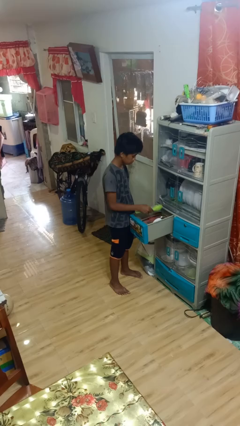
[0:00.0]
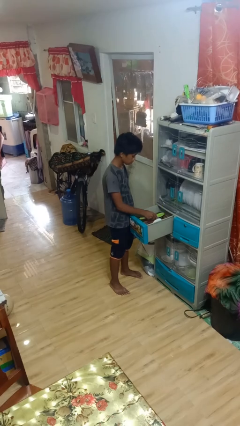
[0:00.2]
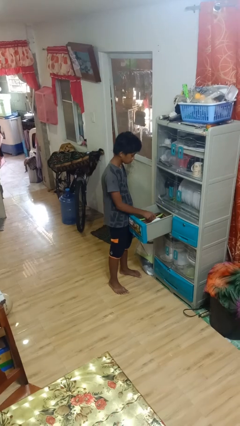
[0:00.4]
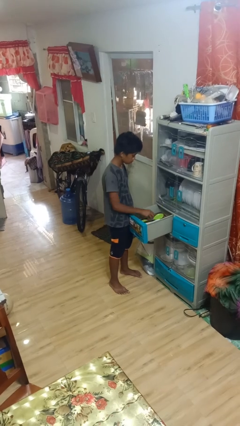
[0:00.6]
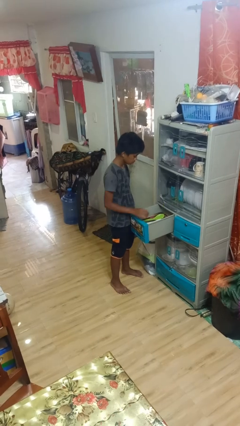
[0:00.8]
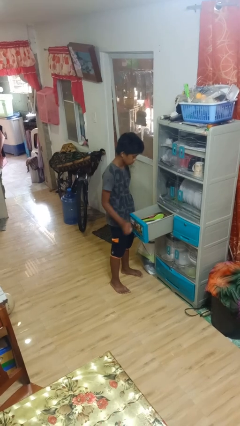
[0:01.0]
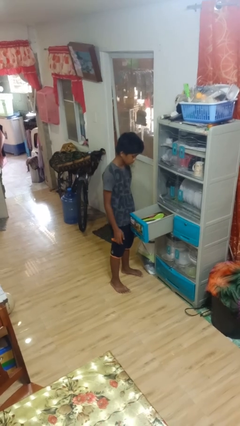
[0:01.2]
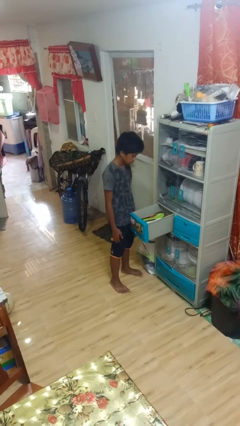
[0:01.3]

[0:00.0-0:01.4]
person puts object into kitchen drawer

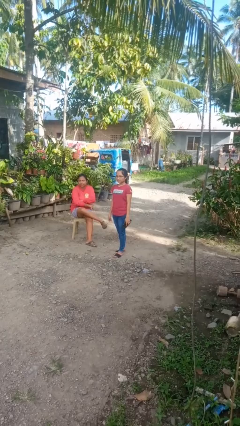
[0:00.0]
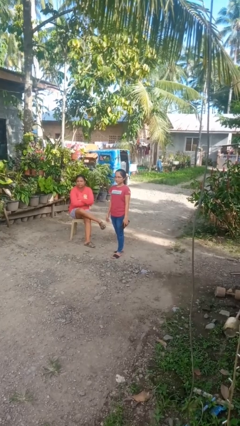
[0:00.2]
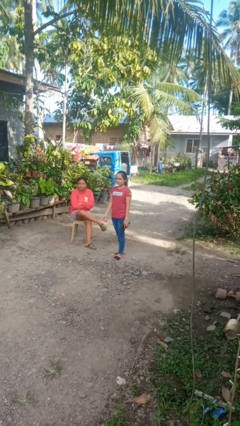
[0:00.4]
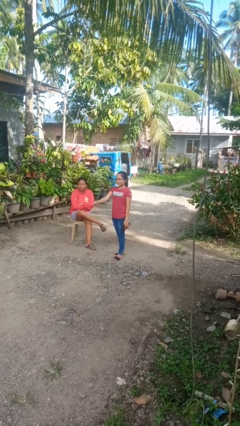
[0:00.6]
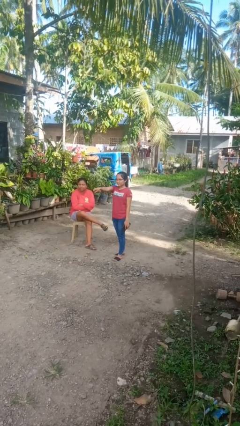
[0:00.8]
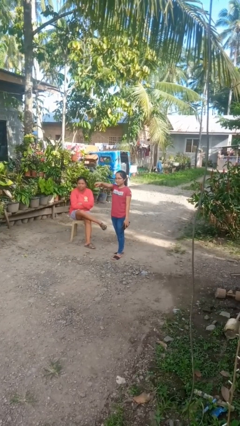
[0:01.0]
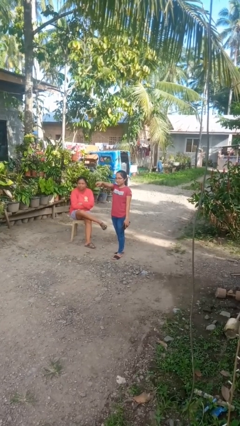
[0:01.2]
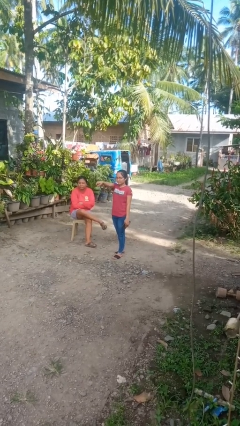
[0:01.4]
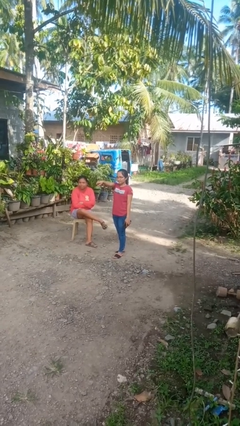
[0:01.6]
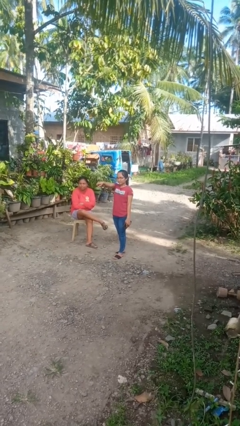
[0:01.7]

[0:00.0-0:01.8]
person points at person

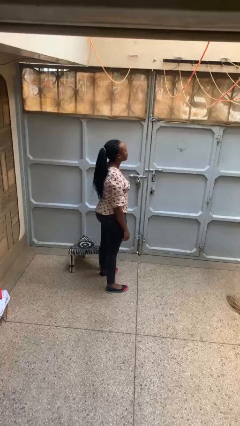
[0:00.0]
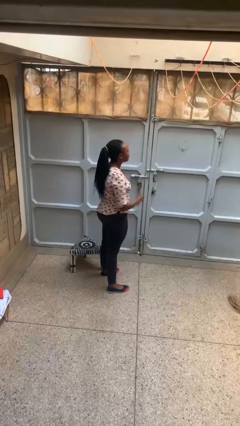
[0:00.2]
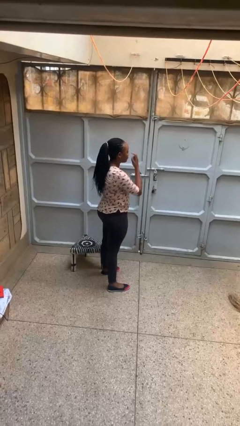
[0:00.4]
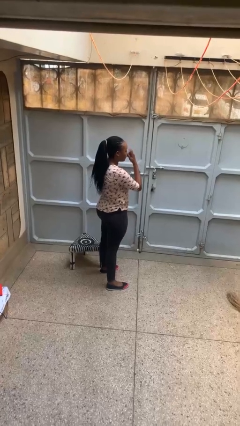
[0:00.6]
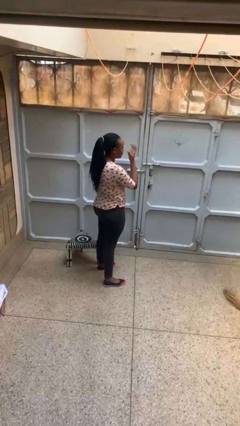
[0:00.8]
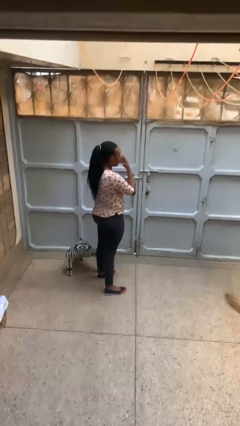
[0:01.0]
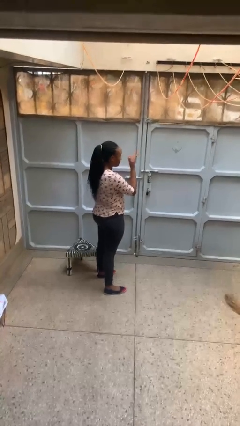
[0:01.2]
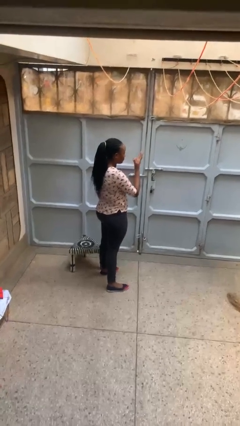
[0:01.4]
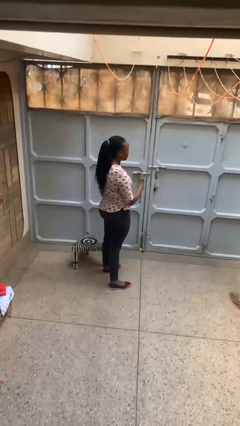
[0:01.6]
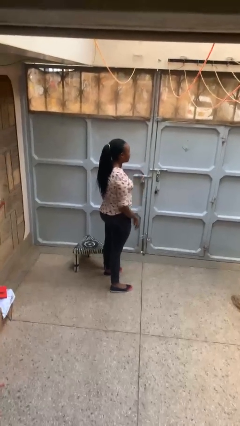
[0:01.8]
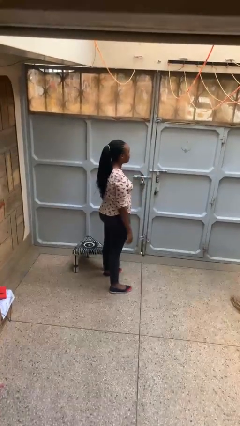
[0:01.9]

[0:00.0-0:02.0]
person gestures watch closely

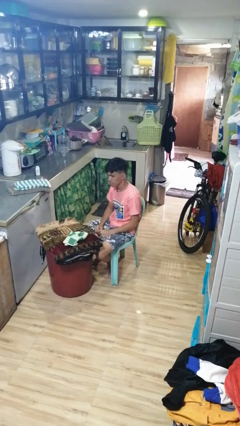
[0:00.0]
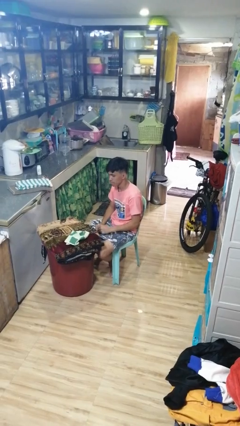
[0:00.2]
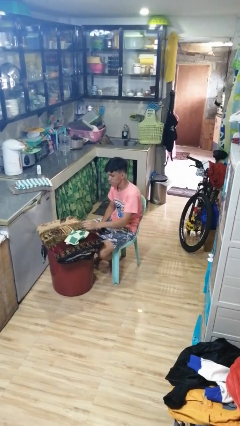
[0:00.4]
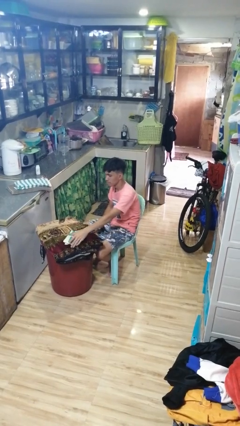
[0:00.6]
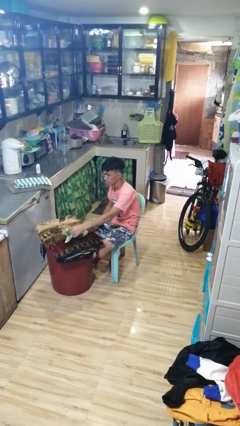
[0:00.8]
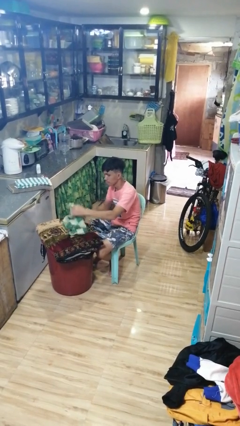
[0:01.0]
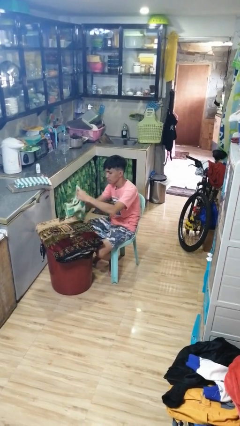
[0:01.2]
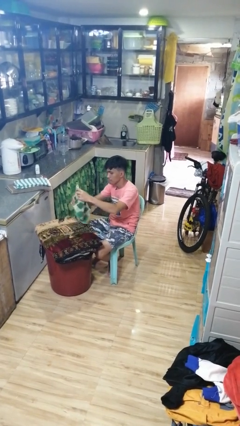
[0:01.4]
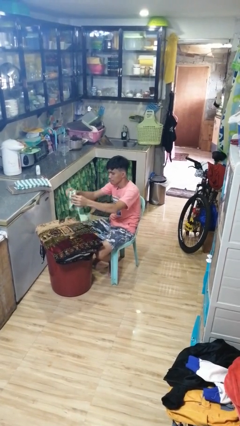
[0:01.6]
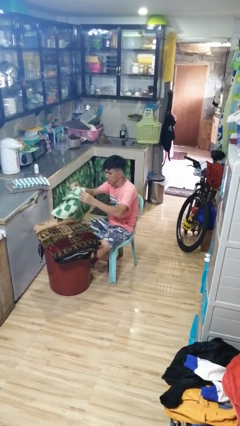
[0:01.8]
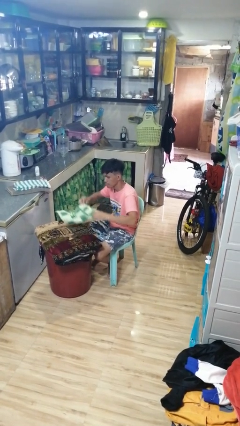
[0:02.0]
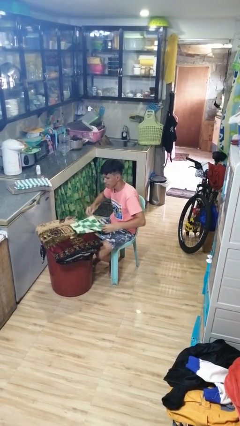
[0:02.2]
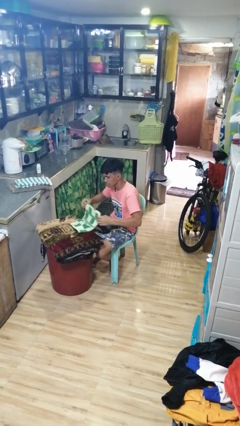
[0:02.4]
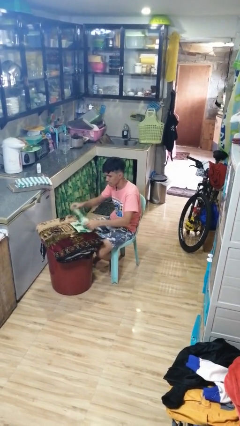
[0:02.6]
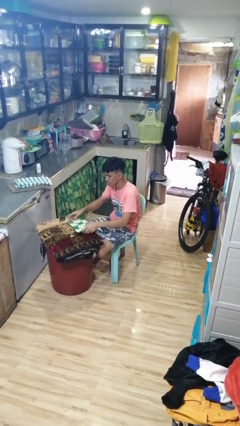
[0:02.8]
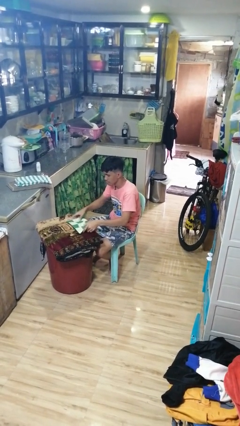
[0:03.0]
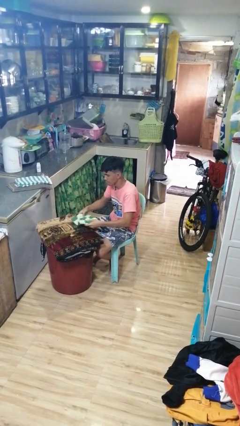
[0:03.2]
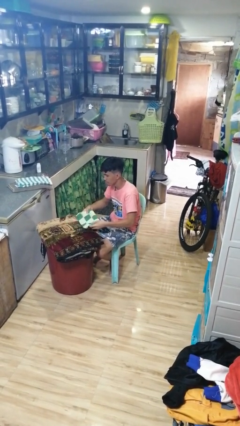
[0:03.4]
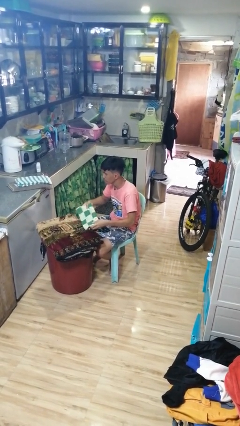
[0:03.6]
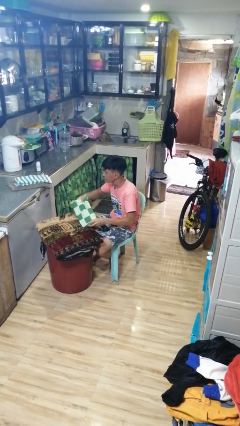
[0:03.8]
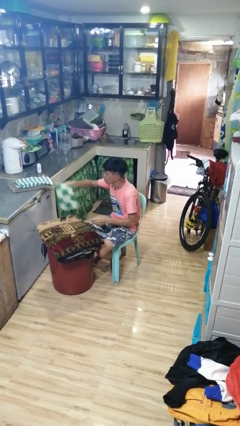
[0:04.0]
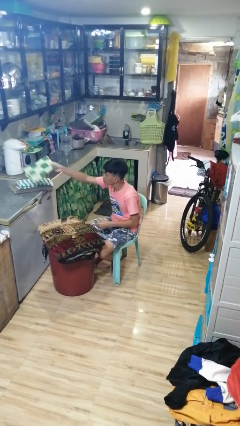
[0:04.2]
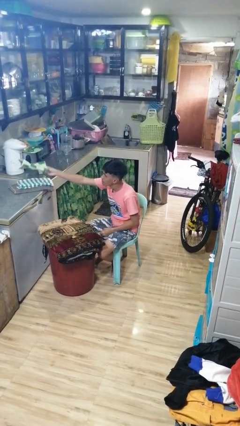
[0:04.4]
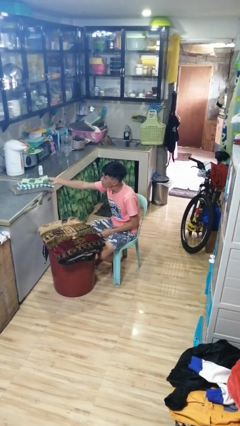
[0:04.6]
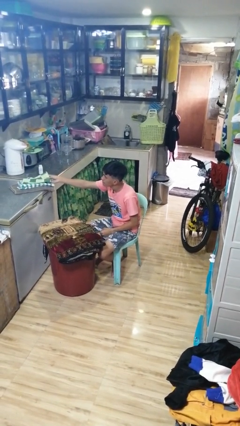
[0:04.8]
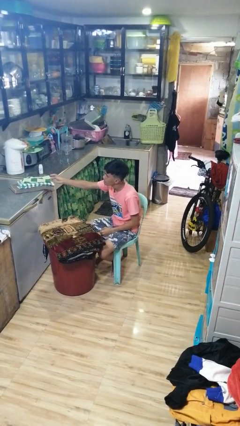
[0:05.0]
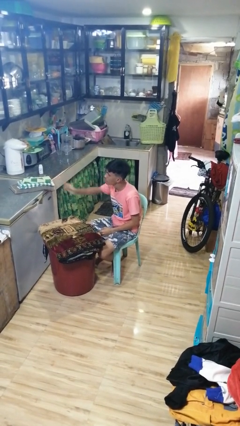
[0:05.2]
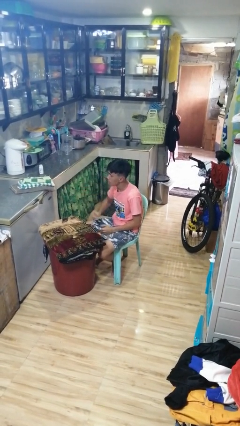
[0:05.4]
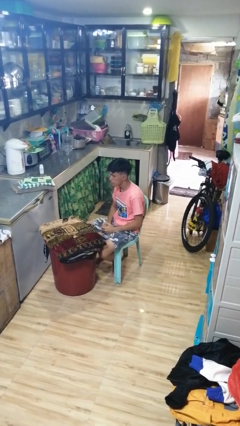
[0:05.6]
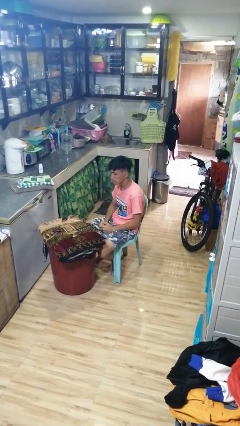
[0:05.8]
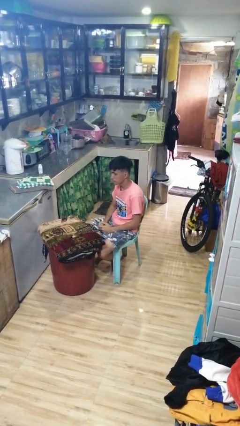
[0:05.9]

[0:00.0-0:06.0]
person folds towel

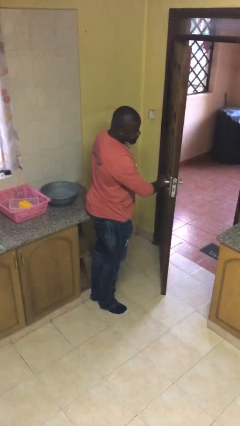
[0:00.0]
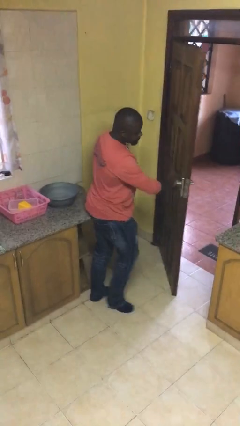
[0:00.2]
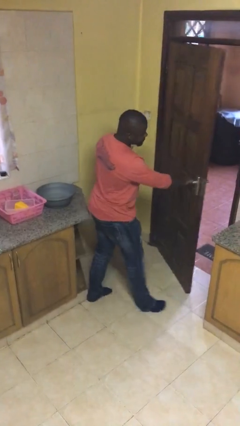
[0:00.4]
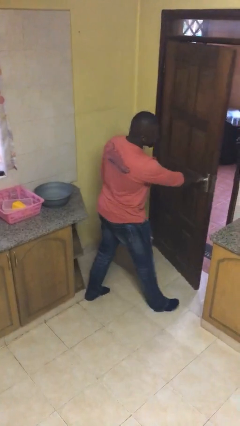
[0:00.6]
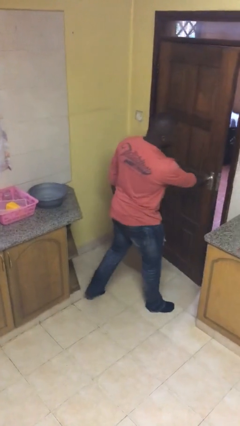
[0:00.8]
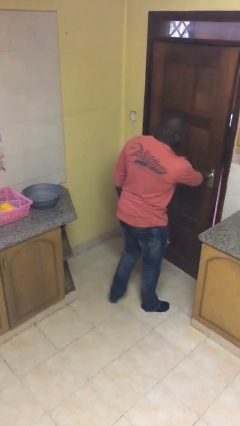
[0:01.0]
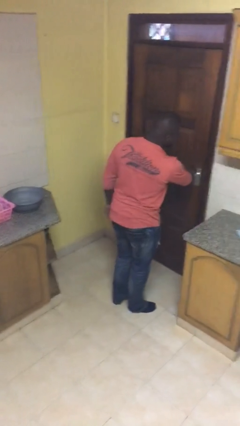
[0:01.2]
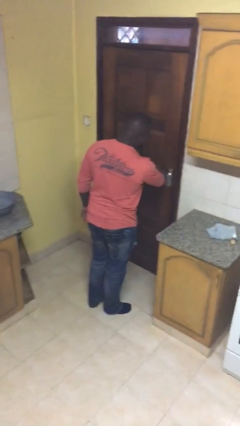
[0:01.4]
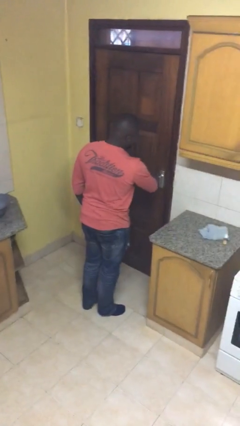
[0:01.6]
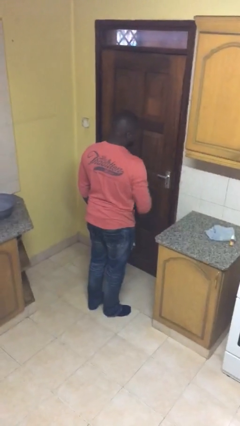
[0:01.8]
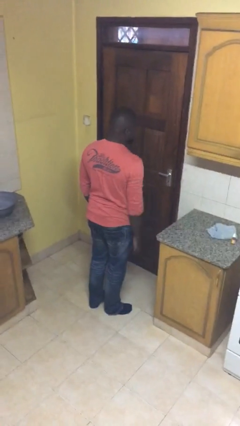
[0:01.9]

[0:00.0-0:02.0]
person closes facility door

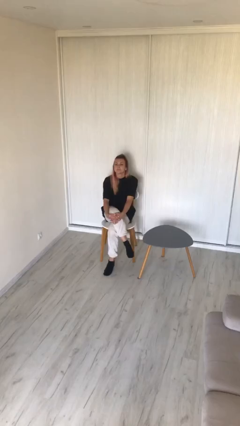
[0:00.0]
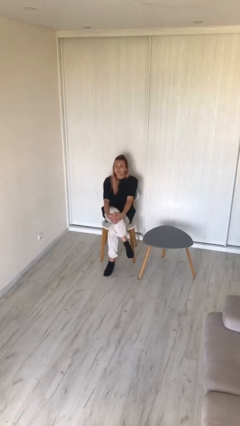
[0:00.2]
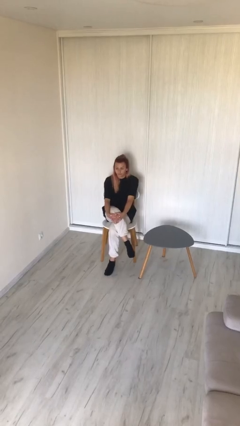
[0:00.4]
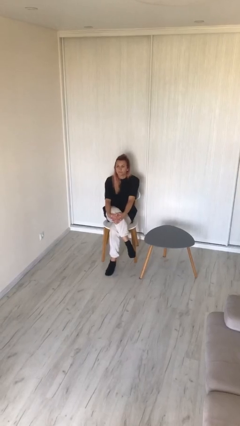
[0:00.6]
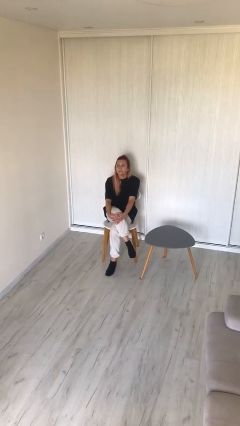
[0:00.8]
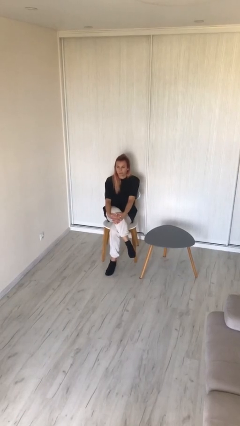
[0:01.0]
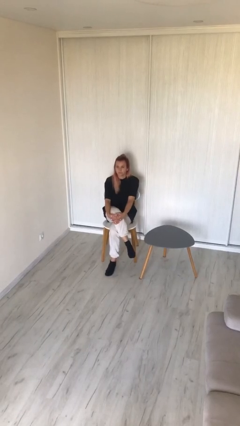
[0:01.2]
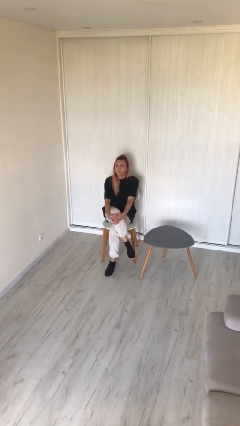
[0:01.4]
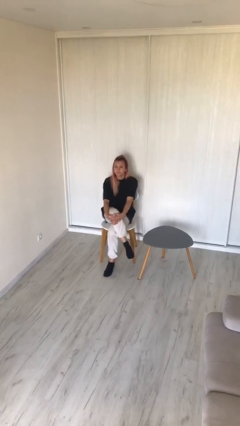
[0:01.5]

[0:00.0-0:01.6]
person nods head

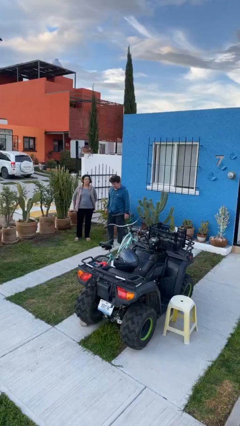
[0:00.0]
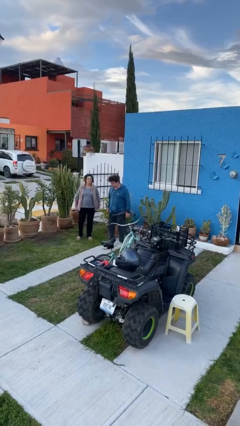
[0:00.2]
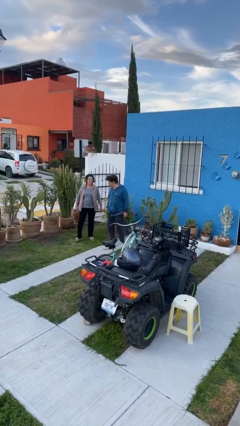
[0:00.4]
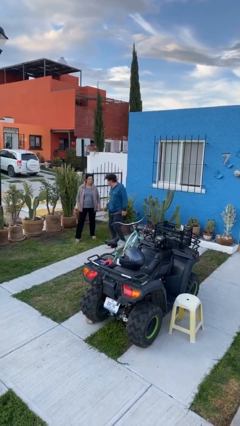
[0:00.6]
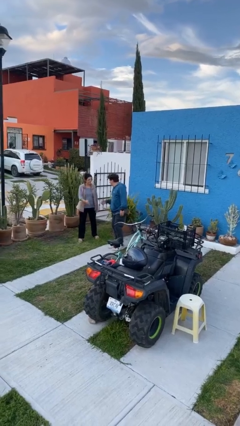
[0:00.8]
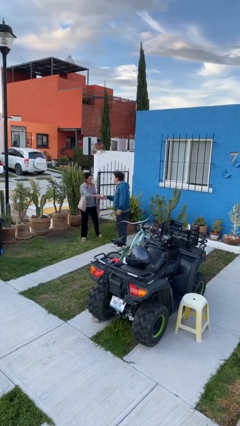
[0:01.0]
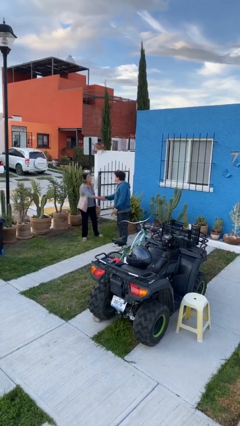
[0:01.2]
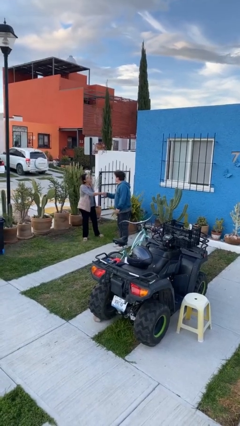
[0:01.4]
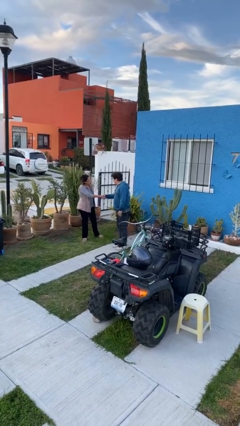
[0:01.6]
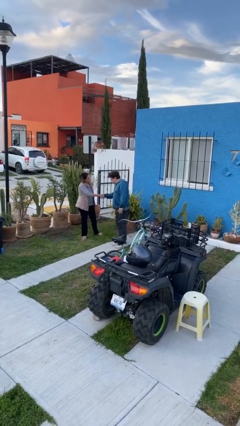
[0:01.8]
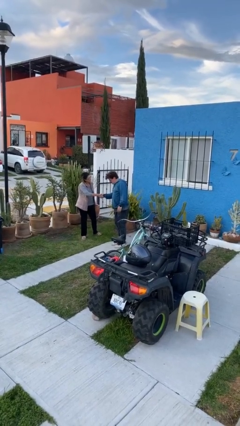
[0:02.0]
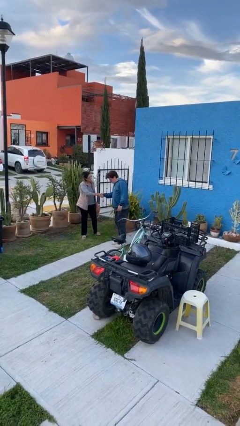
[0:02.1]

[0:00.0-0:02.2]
person shakes hand
